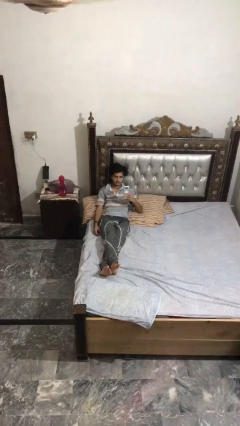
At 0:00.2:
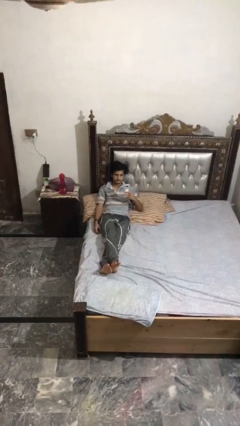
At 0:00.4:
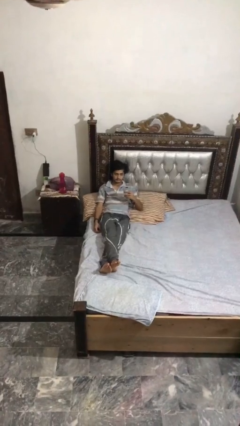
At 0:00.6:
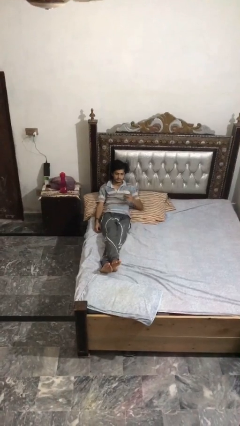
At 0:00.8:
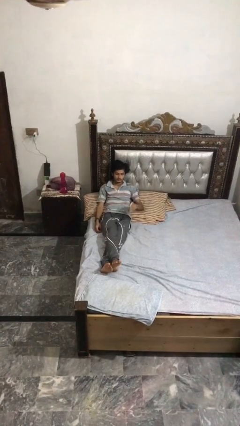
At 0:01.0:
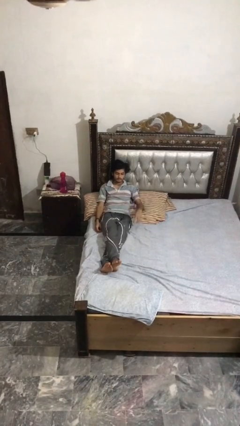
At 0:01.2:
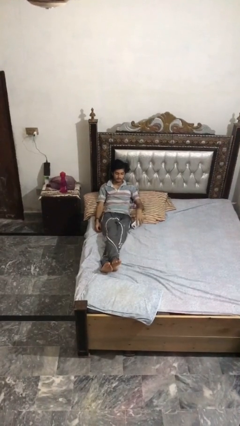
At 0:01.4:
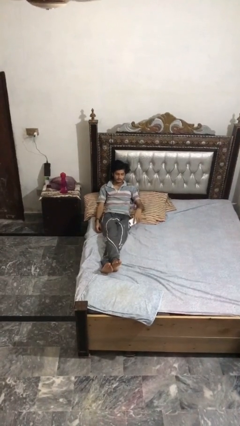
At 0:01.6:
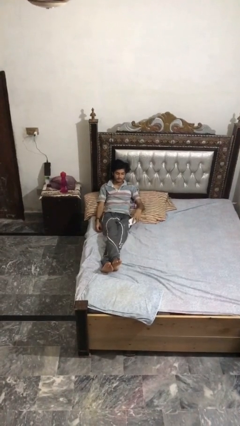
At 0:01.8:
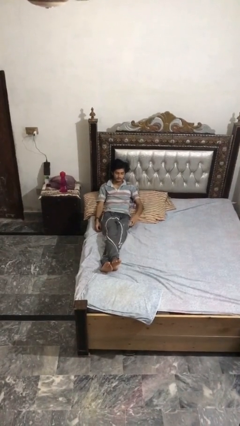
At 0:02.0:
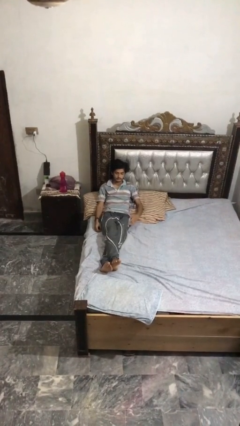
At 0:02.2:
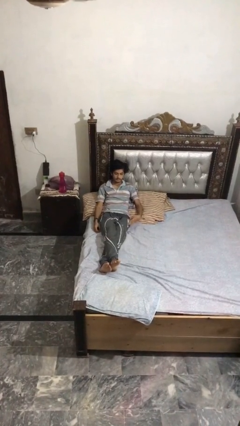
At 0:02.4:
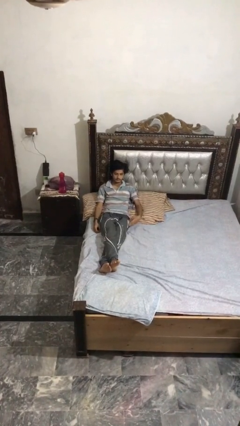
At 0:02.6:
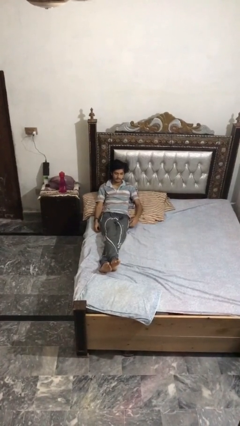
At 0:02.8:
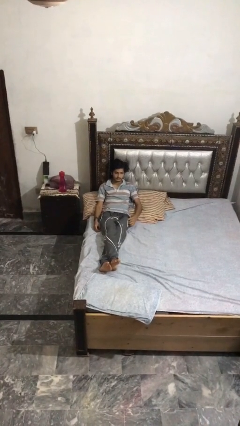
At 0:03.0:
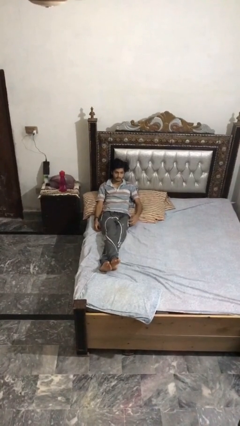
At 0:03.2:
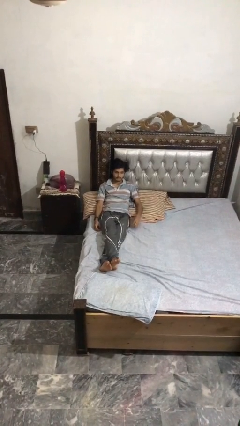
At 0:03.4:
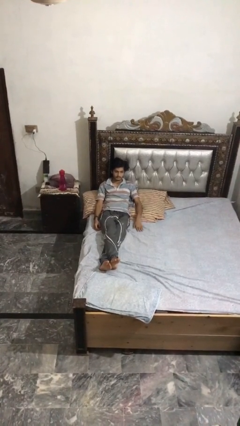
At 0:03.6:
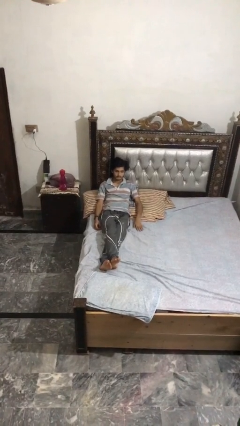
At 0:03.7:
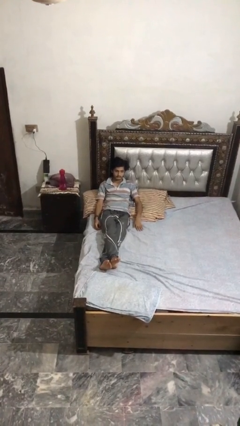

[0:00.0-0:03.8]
person puts phone into pocket

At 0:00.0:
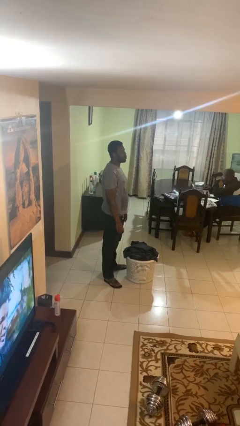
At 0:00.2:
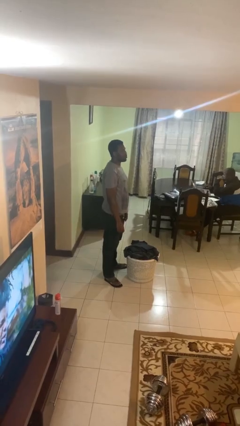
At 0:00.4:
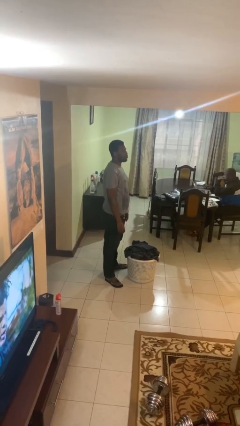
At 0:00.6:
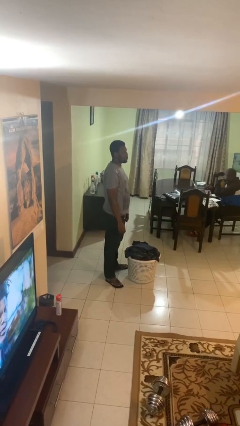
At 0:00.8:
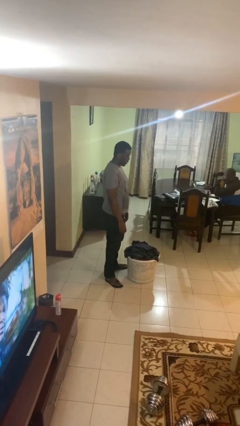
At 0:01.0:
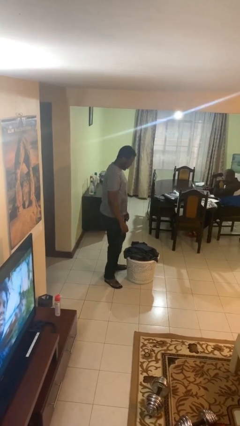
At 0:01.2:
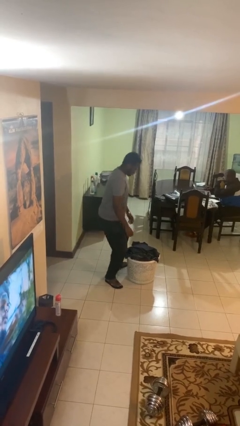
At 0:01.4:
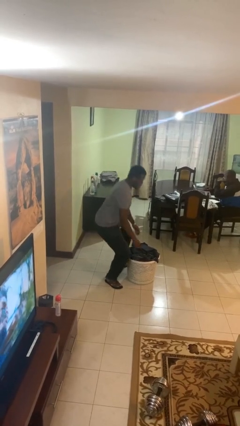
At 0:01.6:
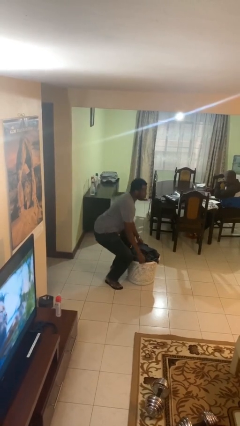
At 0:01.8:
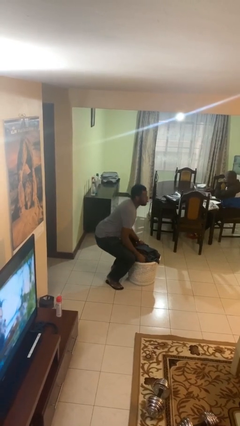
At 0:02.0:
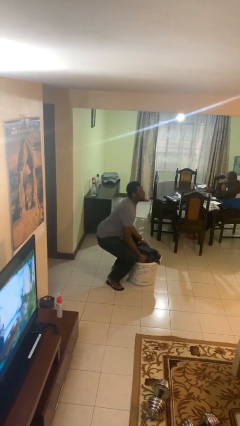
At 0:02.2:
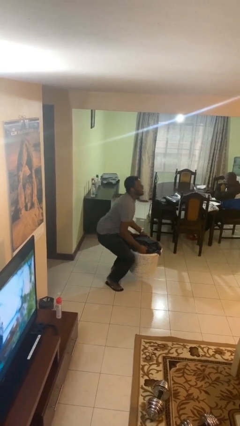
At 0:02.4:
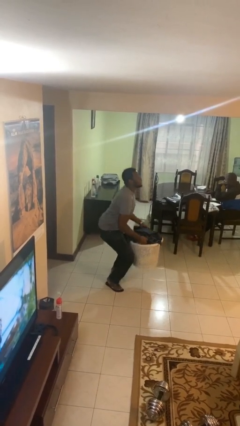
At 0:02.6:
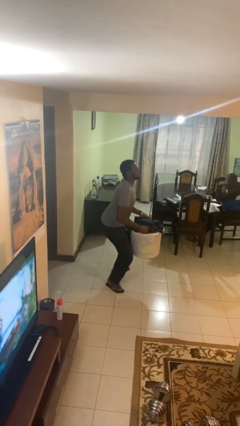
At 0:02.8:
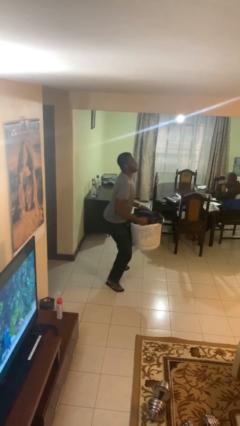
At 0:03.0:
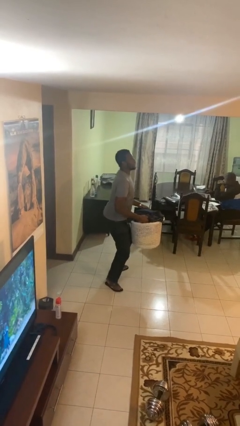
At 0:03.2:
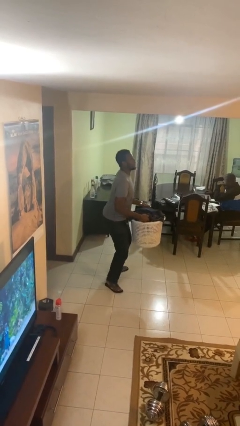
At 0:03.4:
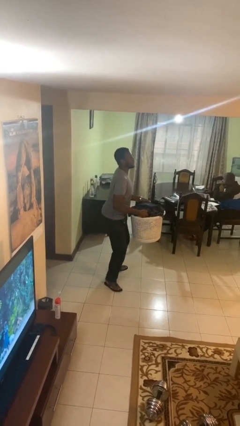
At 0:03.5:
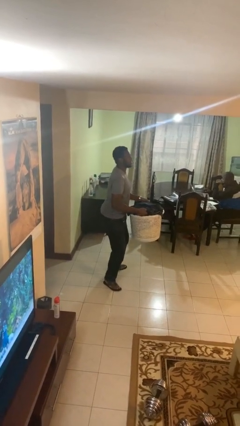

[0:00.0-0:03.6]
person picks up object from floor

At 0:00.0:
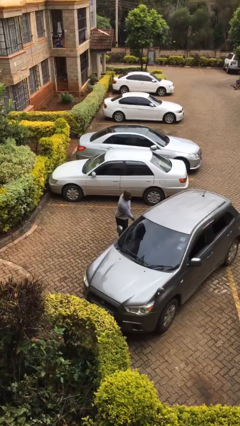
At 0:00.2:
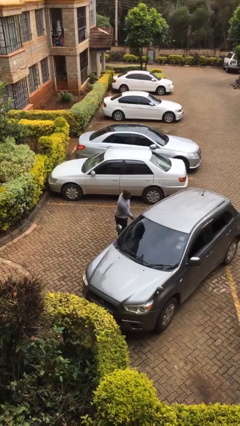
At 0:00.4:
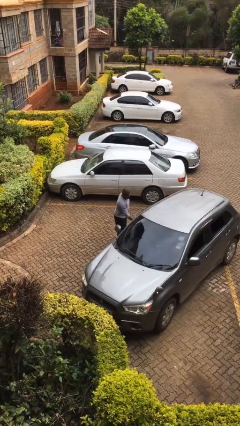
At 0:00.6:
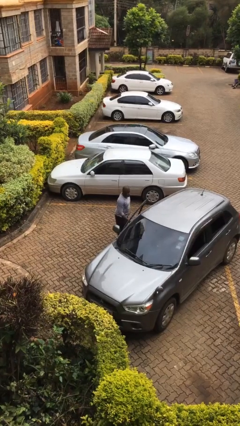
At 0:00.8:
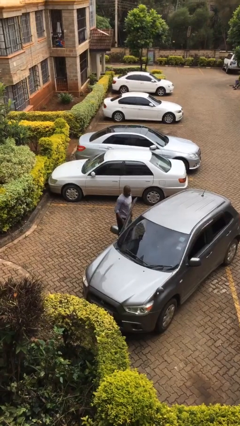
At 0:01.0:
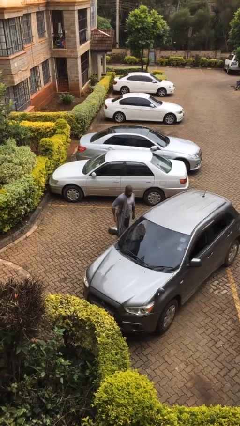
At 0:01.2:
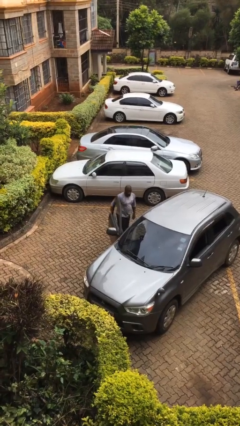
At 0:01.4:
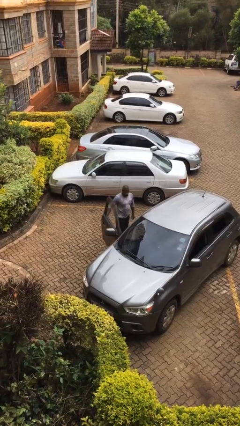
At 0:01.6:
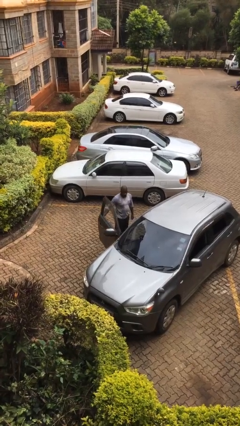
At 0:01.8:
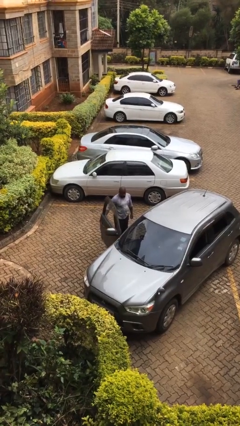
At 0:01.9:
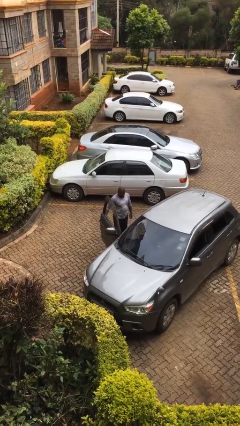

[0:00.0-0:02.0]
person opens car door

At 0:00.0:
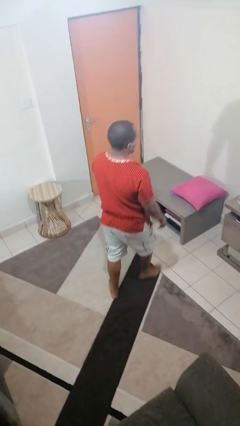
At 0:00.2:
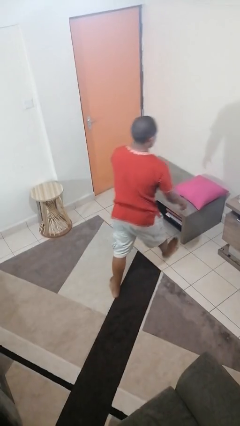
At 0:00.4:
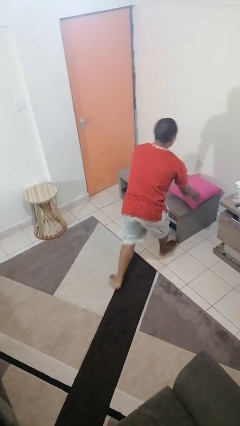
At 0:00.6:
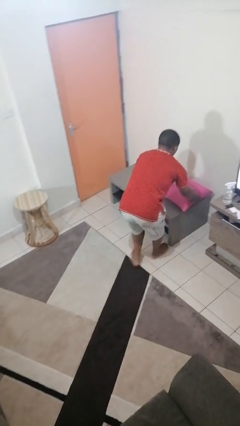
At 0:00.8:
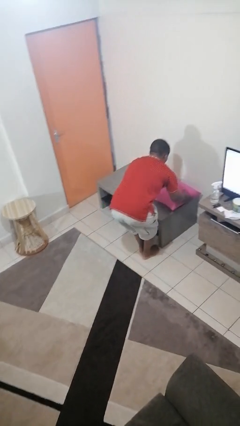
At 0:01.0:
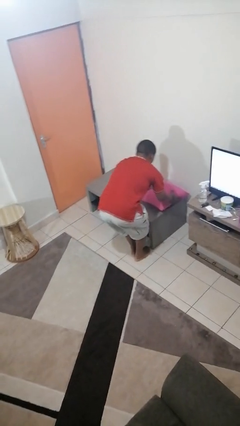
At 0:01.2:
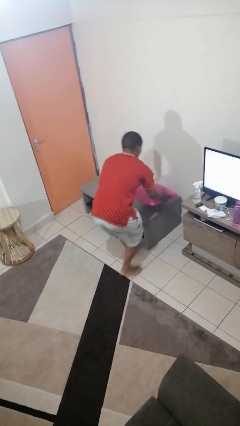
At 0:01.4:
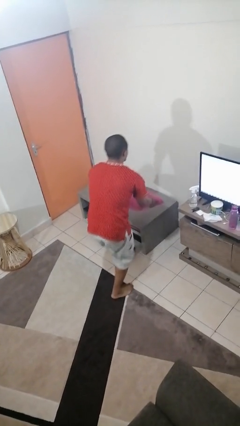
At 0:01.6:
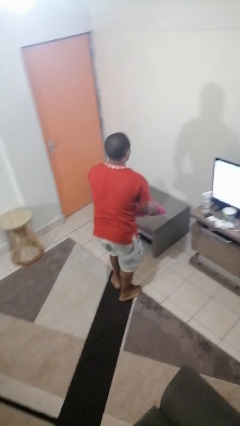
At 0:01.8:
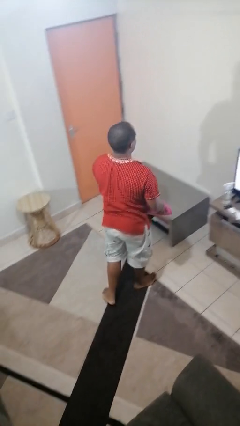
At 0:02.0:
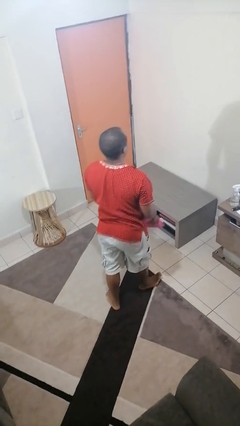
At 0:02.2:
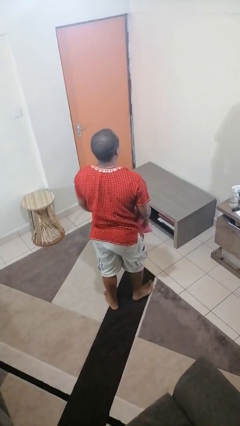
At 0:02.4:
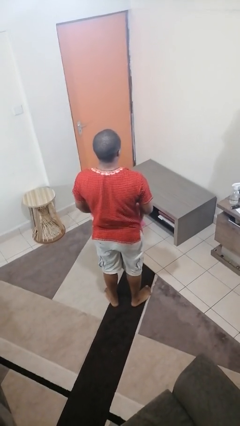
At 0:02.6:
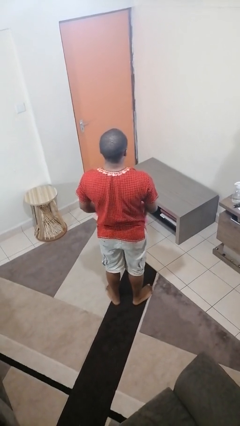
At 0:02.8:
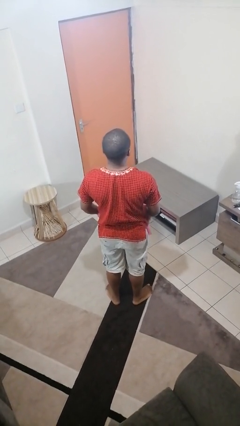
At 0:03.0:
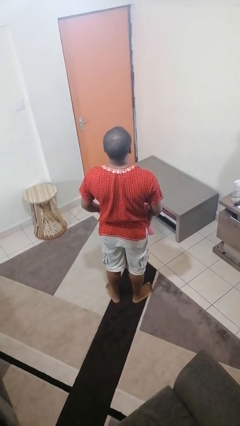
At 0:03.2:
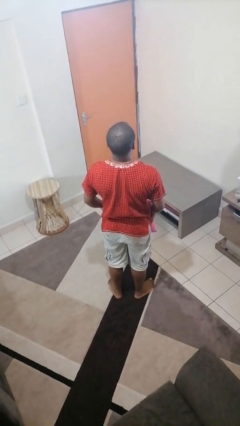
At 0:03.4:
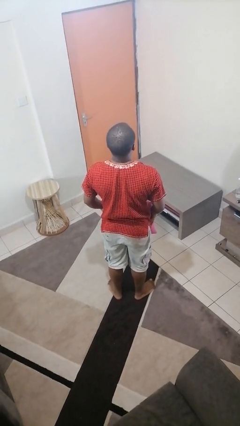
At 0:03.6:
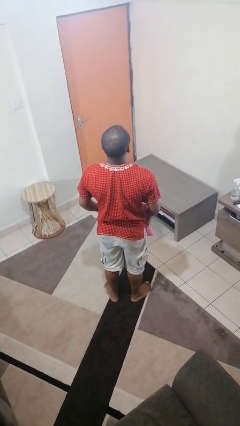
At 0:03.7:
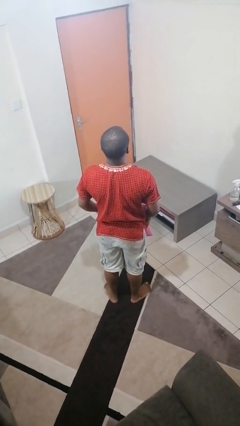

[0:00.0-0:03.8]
person picks up object from table

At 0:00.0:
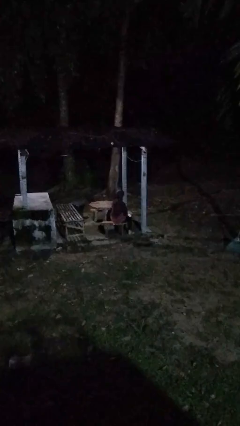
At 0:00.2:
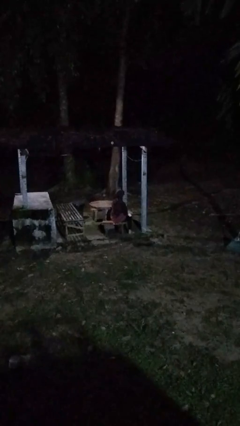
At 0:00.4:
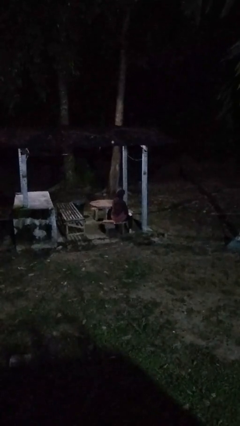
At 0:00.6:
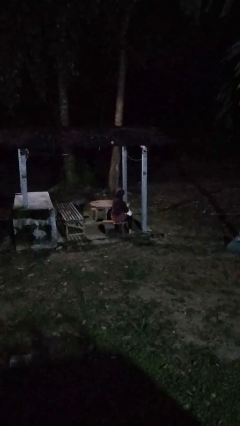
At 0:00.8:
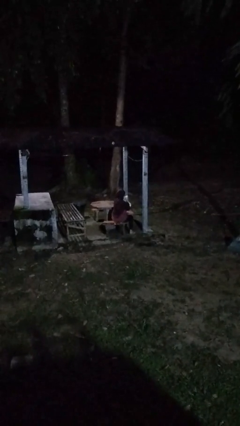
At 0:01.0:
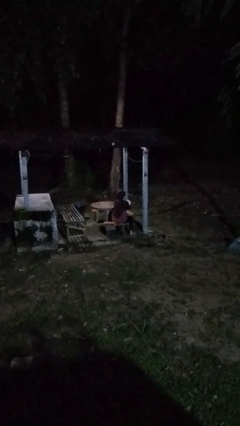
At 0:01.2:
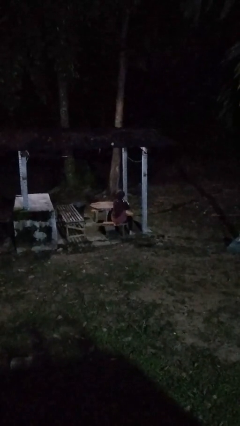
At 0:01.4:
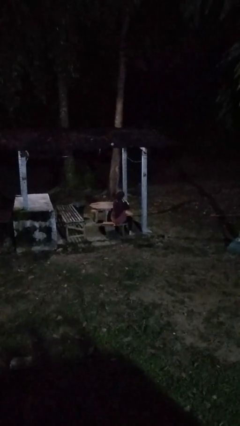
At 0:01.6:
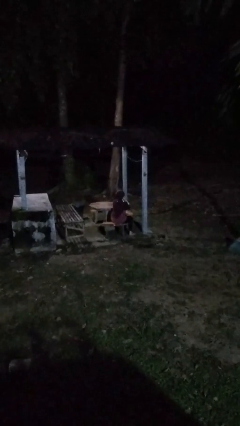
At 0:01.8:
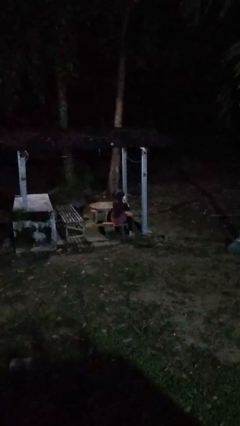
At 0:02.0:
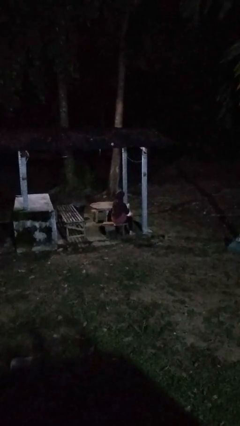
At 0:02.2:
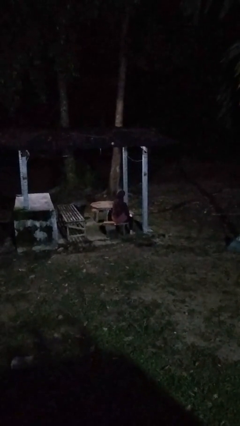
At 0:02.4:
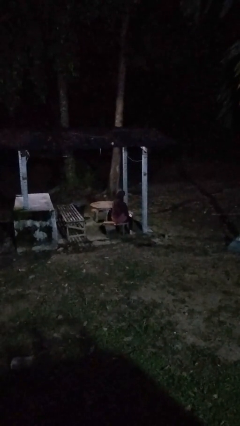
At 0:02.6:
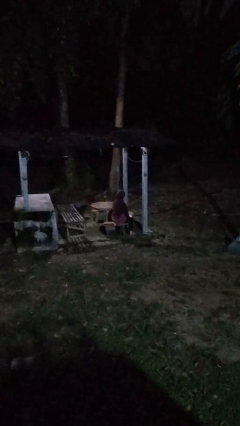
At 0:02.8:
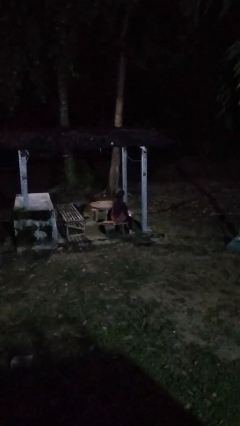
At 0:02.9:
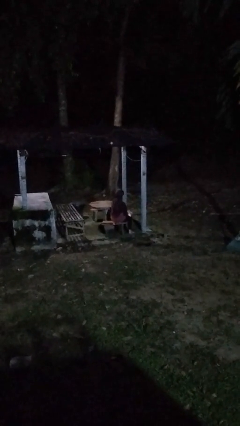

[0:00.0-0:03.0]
person blows nose

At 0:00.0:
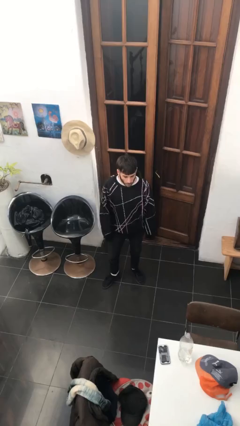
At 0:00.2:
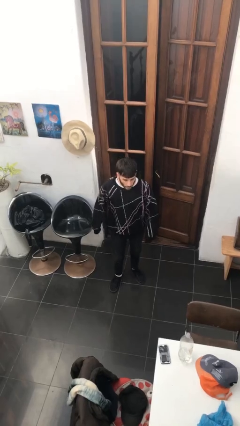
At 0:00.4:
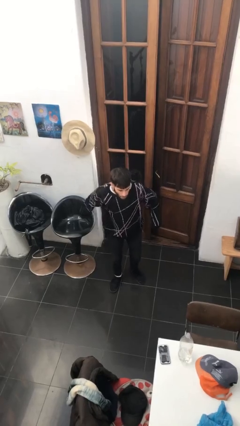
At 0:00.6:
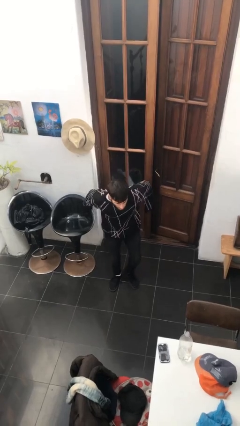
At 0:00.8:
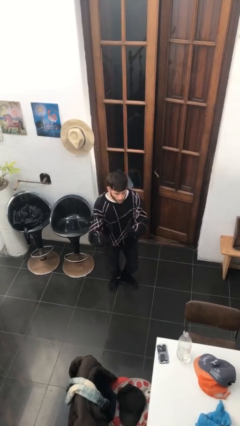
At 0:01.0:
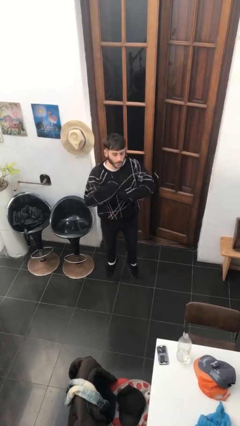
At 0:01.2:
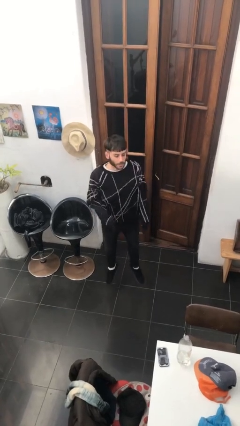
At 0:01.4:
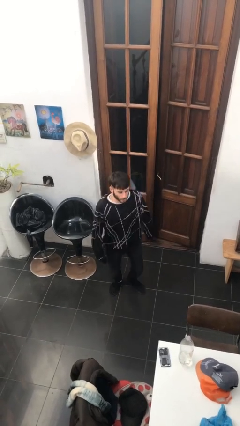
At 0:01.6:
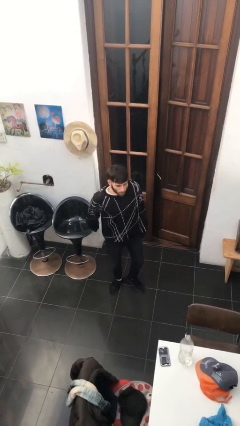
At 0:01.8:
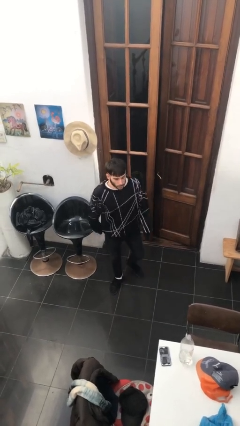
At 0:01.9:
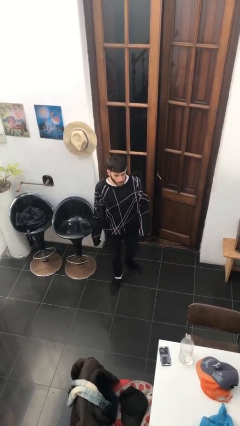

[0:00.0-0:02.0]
person jumps
